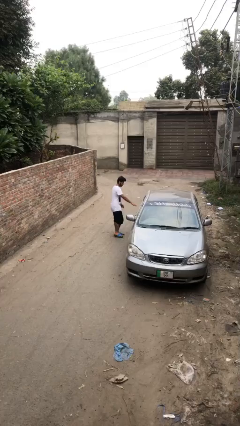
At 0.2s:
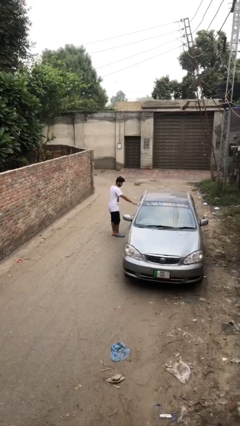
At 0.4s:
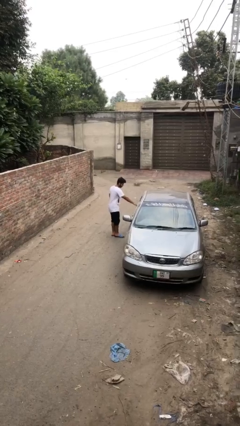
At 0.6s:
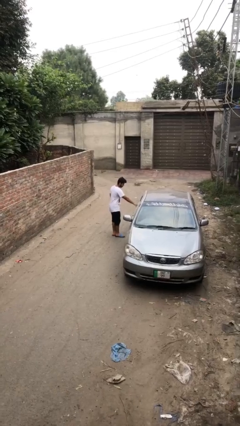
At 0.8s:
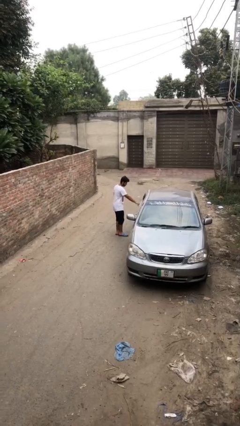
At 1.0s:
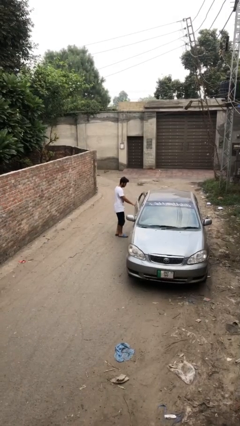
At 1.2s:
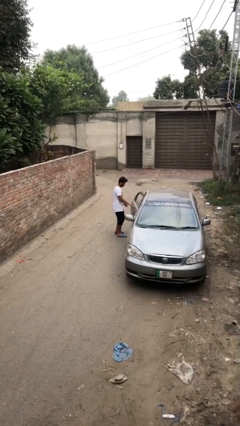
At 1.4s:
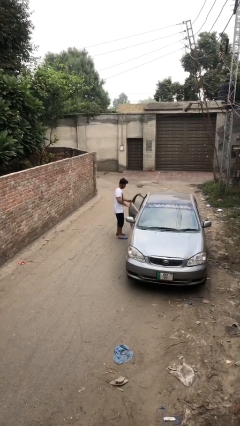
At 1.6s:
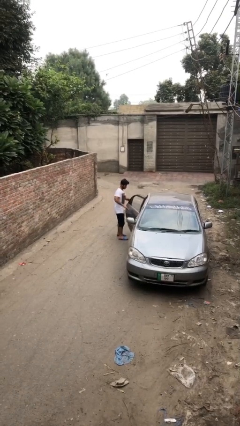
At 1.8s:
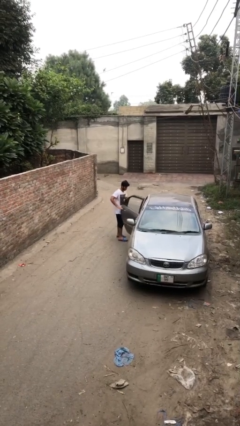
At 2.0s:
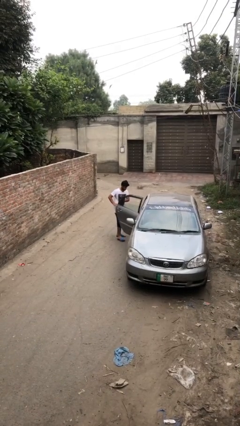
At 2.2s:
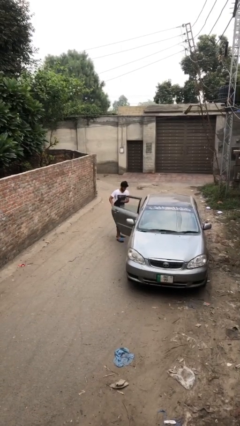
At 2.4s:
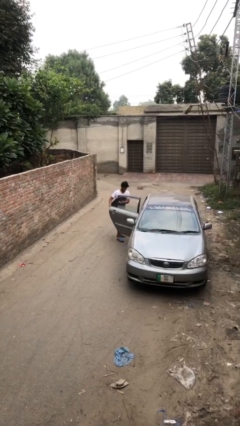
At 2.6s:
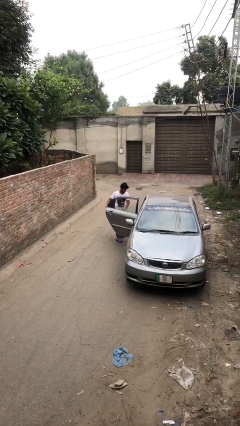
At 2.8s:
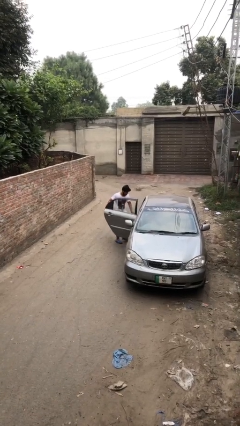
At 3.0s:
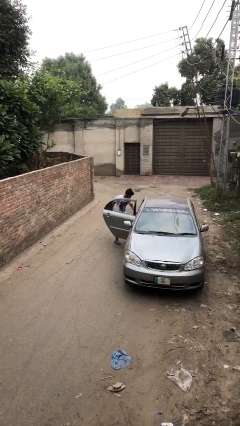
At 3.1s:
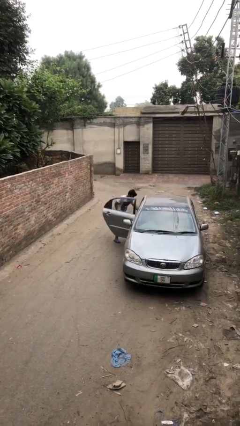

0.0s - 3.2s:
person opens car door

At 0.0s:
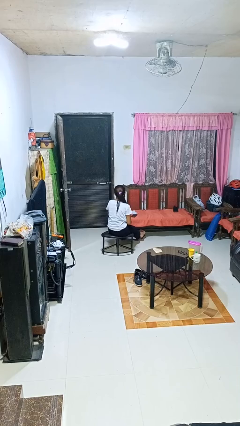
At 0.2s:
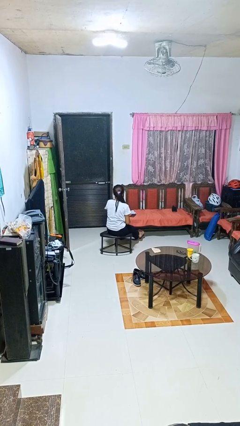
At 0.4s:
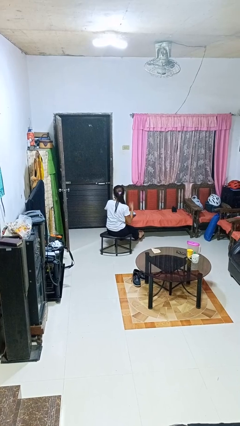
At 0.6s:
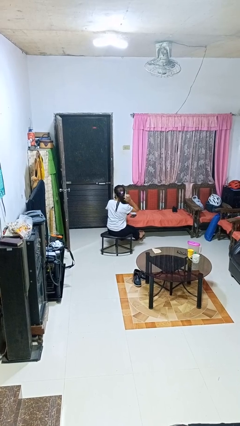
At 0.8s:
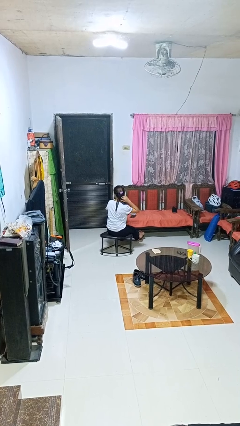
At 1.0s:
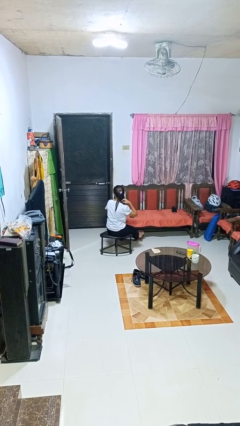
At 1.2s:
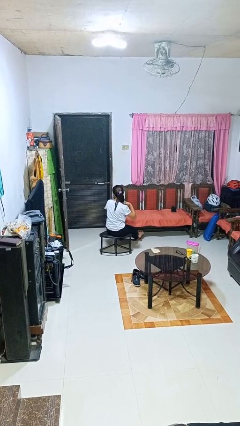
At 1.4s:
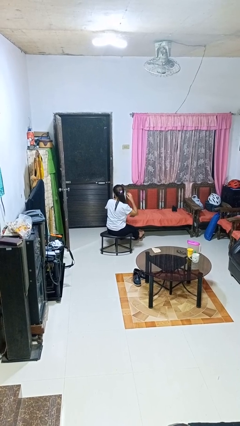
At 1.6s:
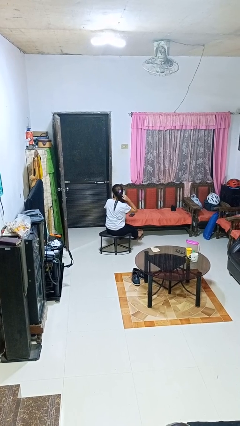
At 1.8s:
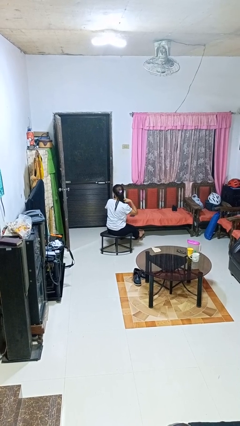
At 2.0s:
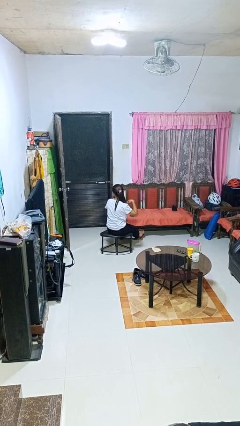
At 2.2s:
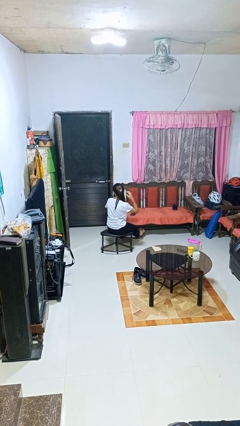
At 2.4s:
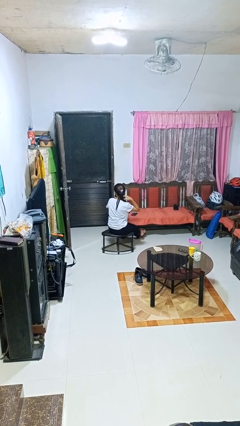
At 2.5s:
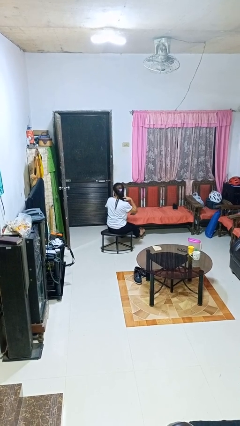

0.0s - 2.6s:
person strokes hair

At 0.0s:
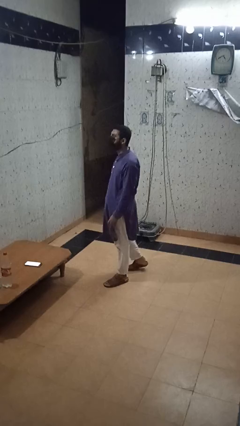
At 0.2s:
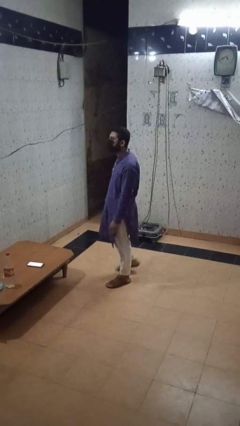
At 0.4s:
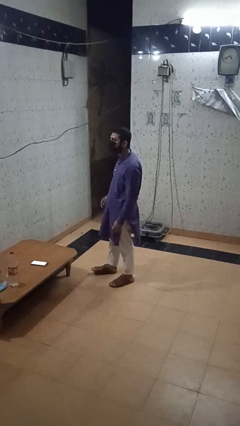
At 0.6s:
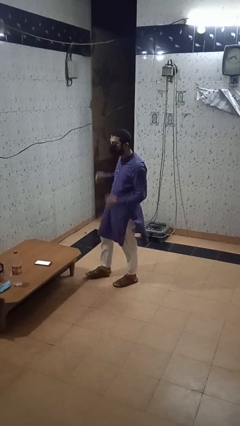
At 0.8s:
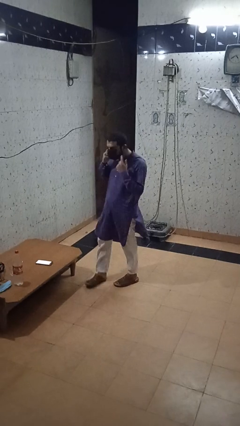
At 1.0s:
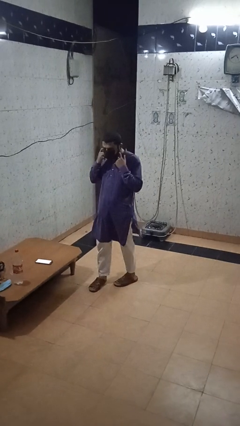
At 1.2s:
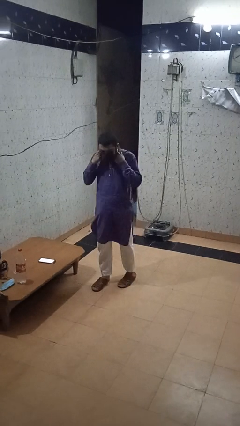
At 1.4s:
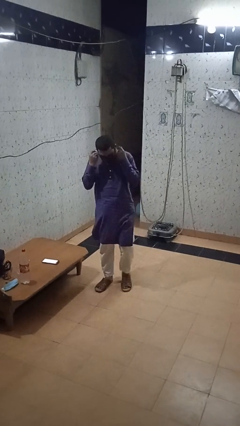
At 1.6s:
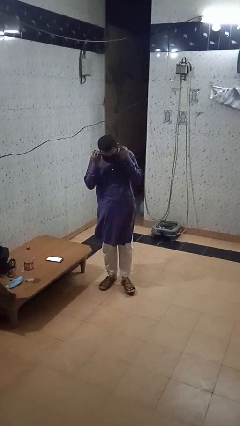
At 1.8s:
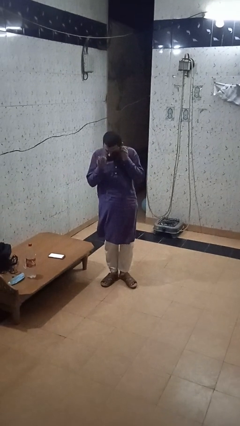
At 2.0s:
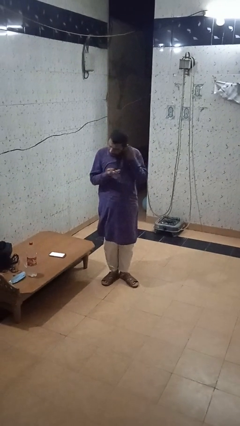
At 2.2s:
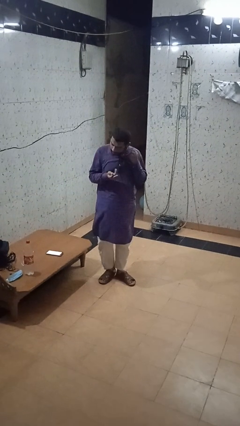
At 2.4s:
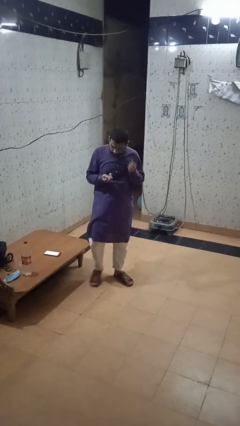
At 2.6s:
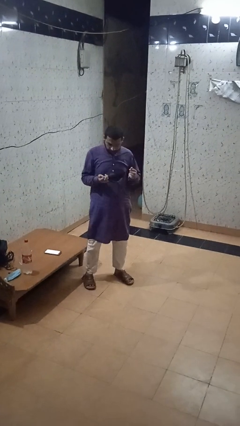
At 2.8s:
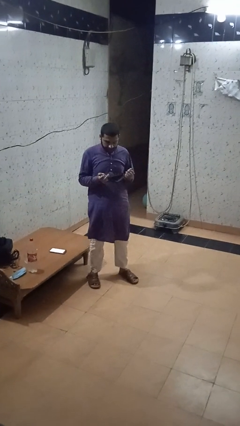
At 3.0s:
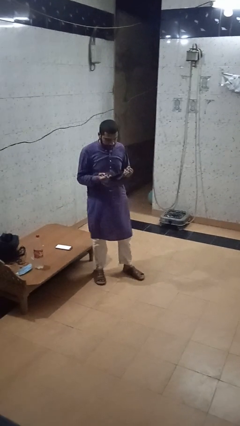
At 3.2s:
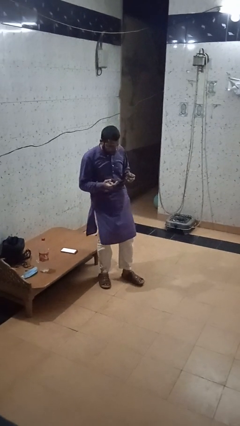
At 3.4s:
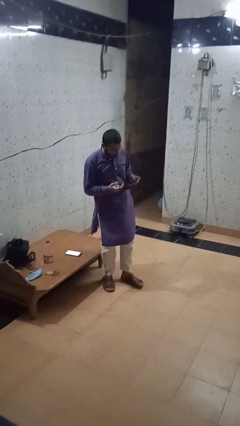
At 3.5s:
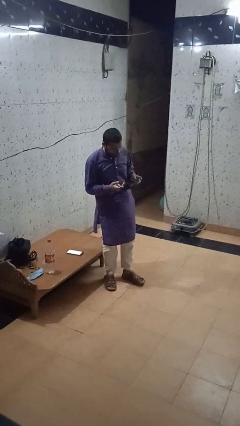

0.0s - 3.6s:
person takes off facemask

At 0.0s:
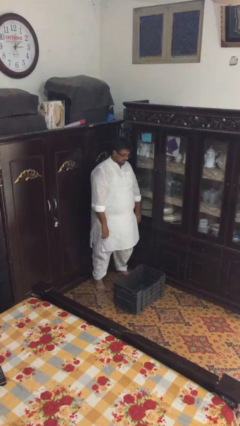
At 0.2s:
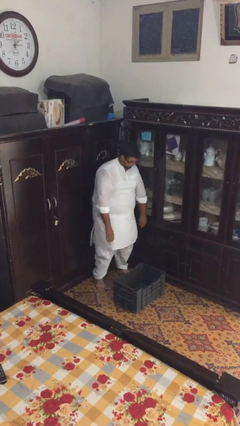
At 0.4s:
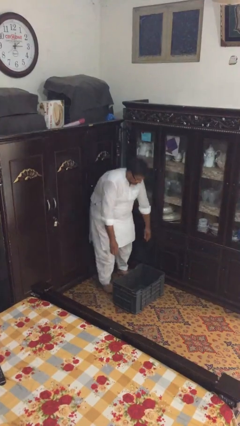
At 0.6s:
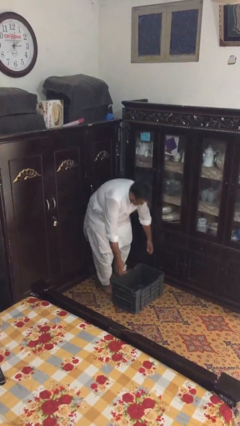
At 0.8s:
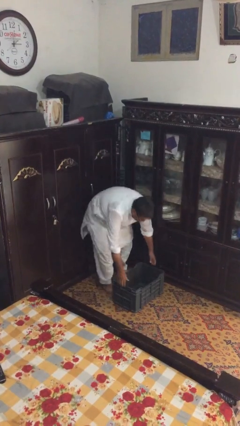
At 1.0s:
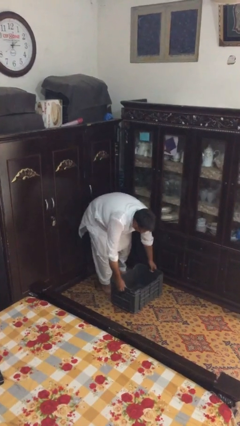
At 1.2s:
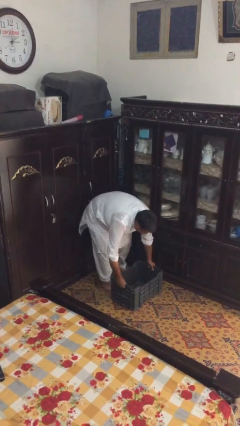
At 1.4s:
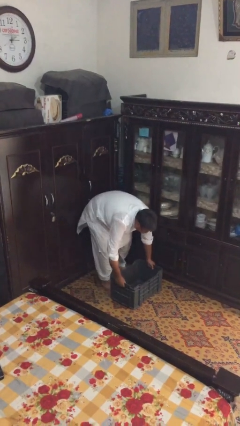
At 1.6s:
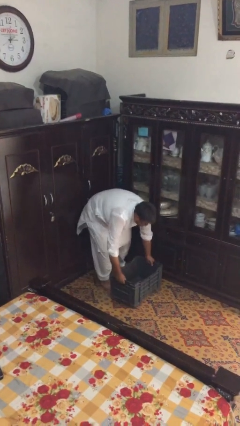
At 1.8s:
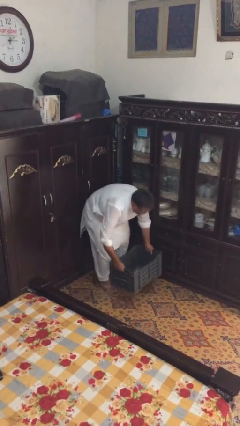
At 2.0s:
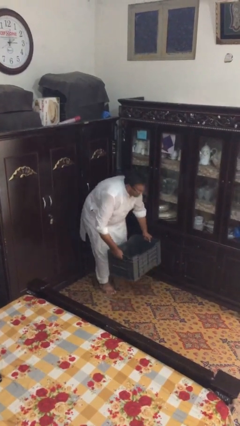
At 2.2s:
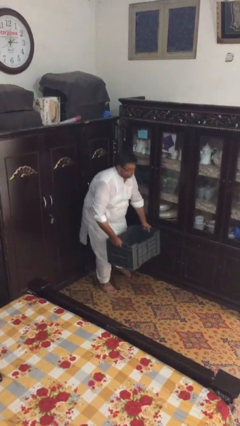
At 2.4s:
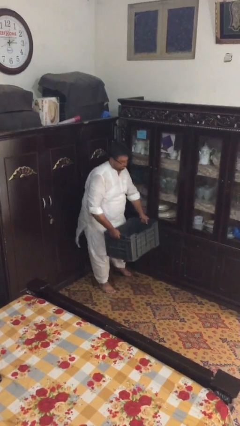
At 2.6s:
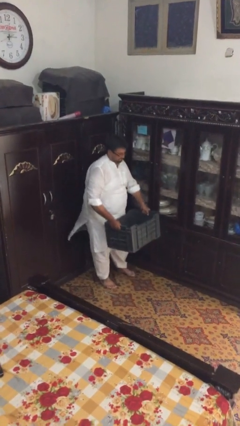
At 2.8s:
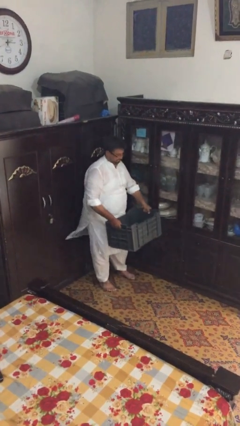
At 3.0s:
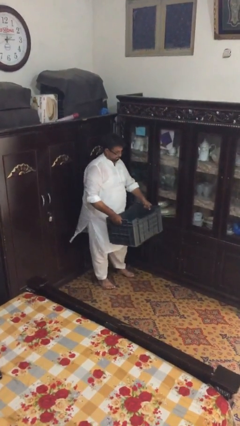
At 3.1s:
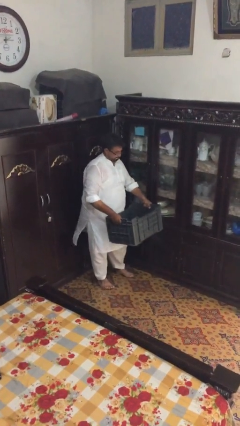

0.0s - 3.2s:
person picks up object from floor

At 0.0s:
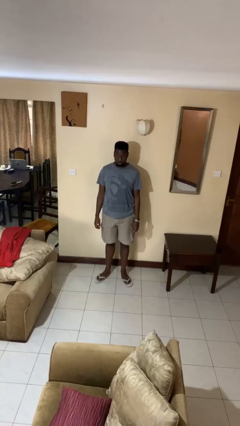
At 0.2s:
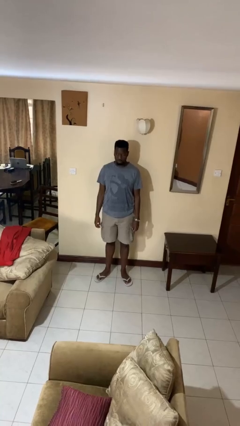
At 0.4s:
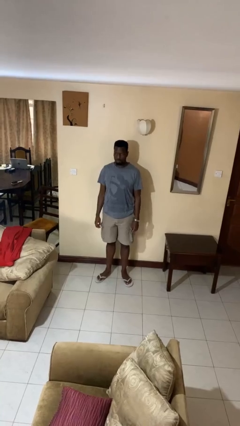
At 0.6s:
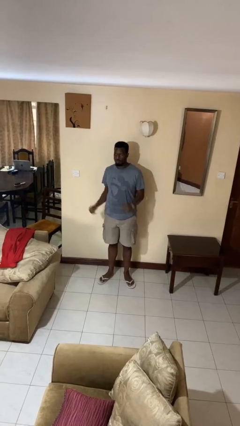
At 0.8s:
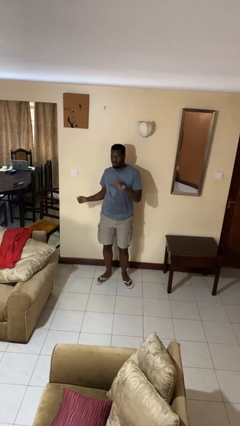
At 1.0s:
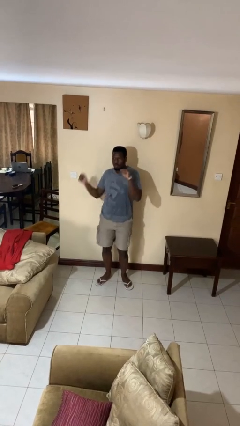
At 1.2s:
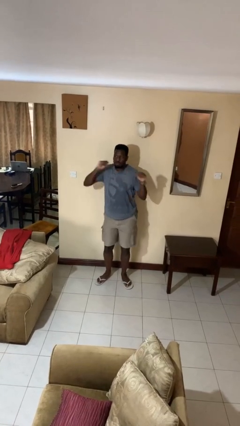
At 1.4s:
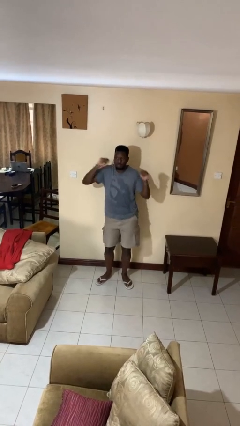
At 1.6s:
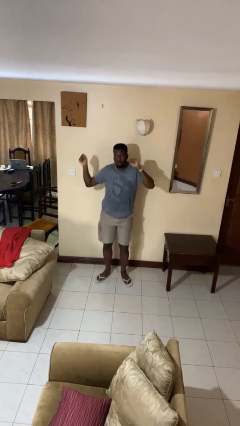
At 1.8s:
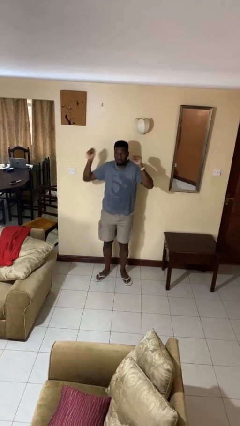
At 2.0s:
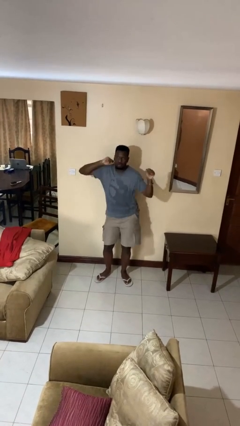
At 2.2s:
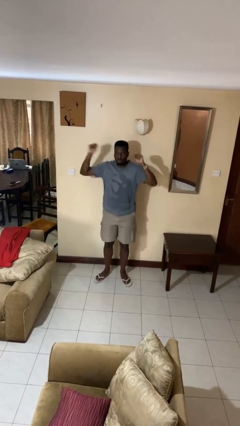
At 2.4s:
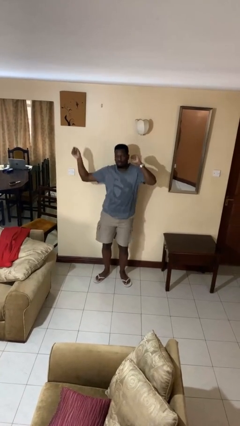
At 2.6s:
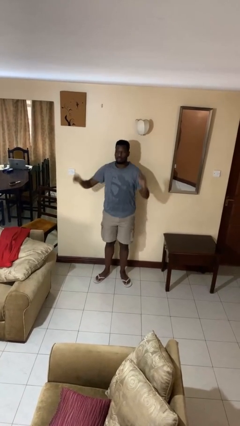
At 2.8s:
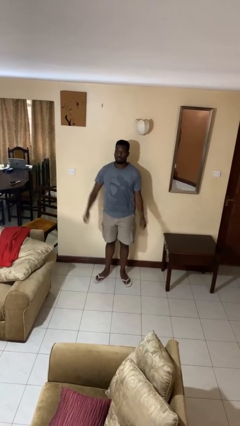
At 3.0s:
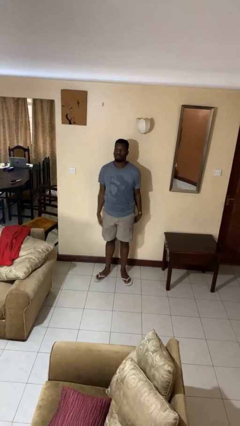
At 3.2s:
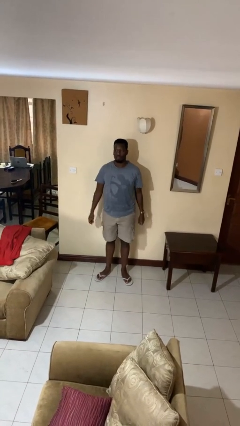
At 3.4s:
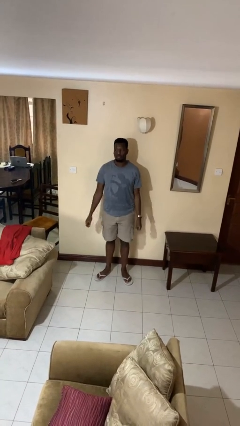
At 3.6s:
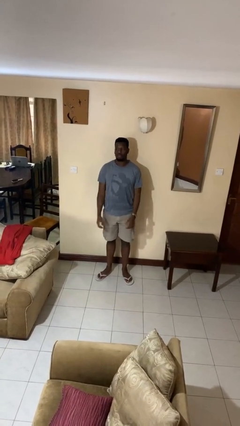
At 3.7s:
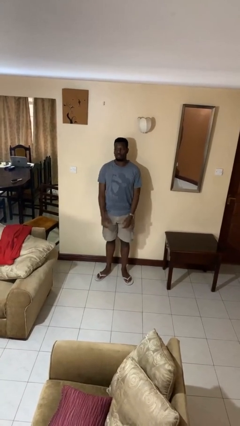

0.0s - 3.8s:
person dances in place

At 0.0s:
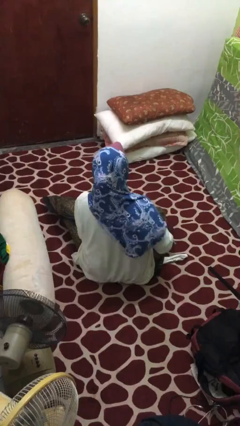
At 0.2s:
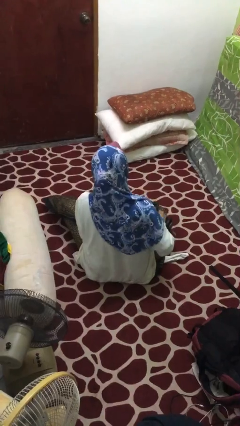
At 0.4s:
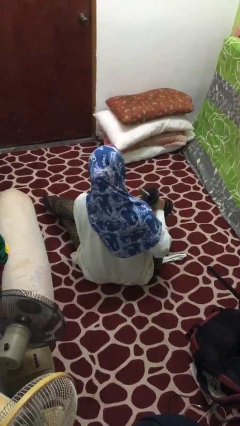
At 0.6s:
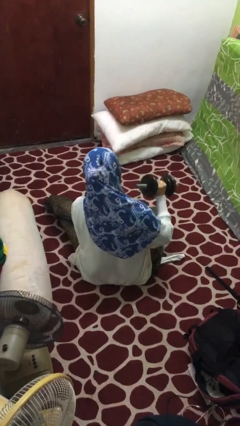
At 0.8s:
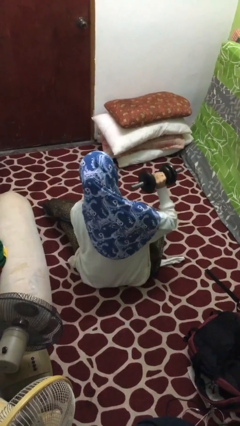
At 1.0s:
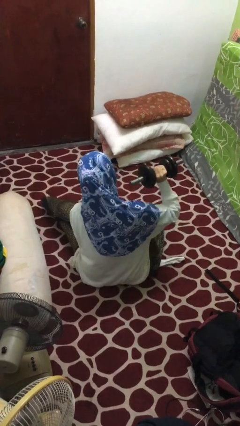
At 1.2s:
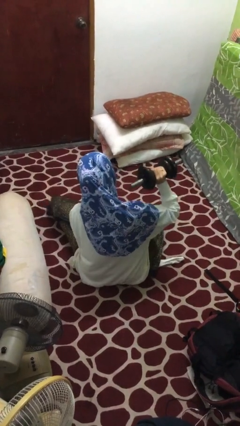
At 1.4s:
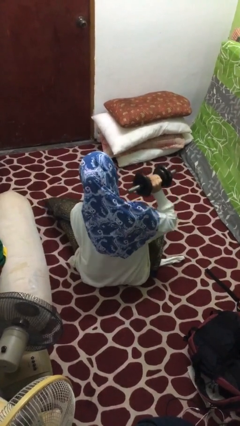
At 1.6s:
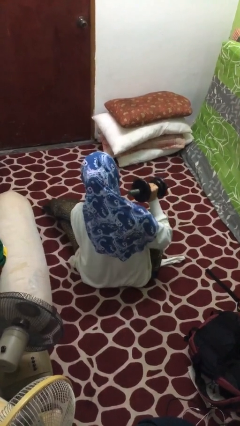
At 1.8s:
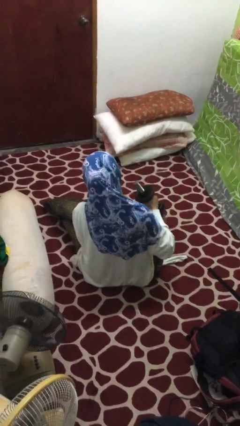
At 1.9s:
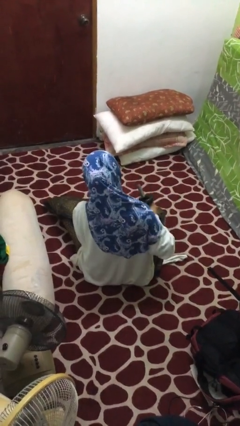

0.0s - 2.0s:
person lifts dumbbells
